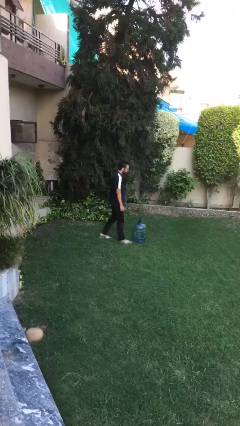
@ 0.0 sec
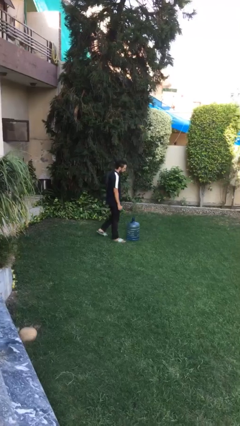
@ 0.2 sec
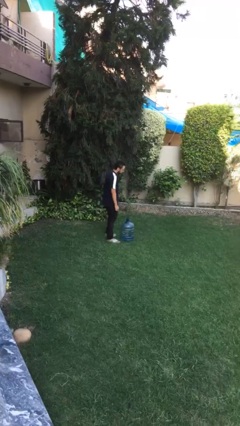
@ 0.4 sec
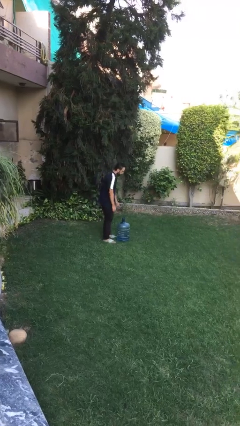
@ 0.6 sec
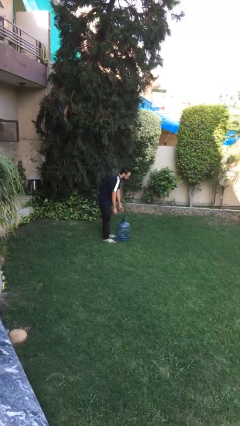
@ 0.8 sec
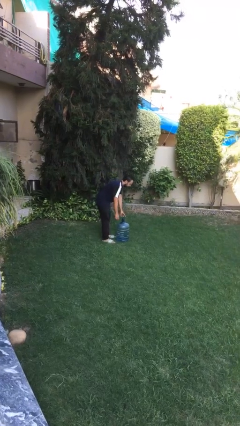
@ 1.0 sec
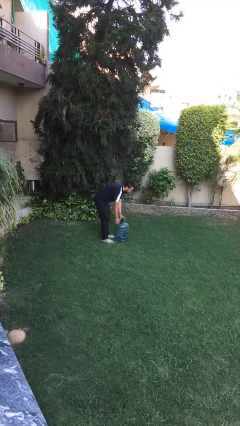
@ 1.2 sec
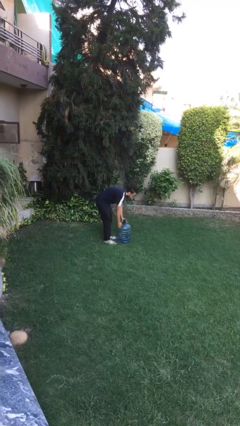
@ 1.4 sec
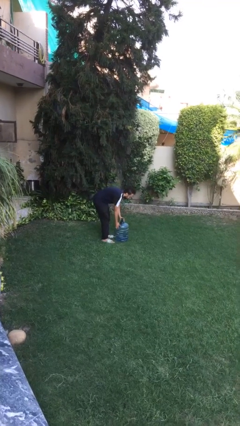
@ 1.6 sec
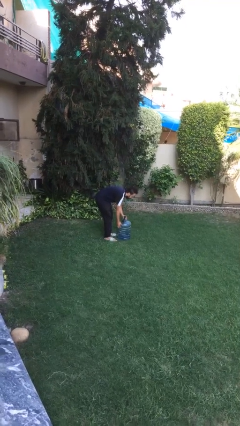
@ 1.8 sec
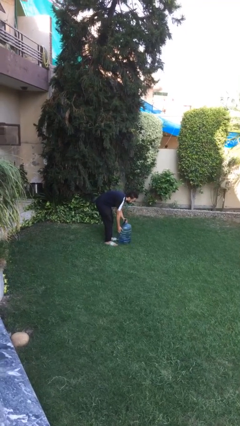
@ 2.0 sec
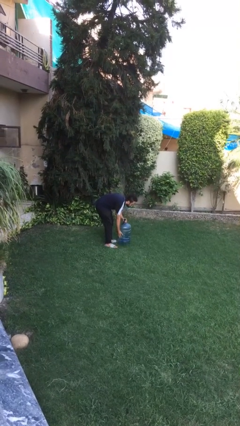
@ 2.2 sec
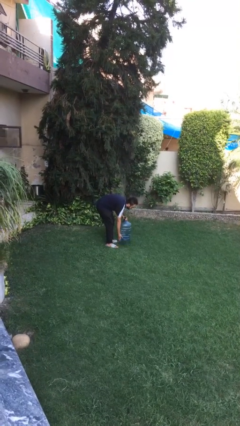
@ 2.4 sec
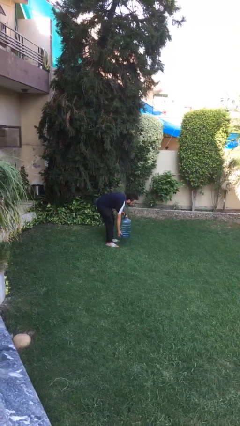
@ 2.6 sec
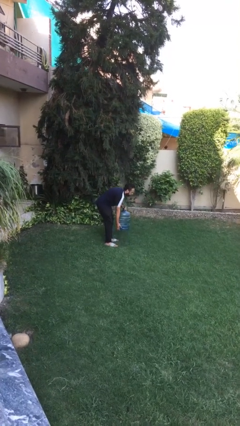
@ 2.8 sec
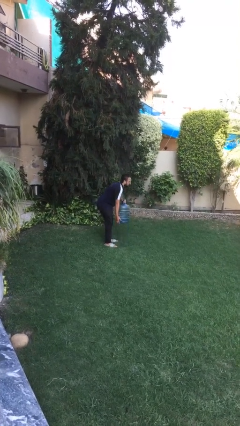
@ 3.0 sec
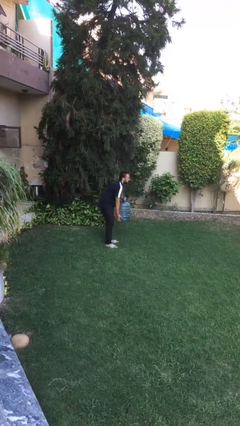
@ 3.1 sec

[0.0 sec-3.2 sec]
person picks up object from floor

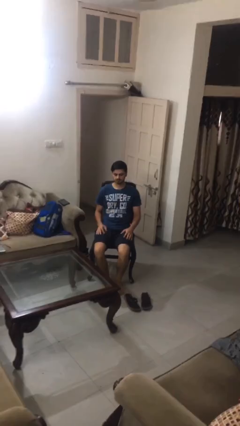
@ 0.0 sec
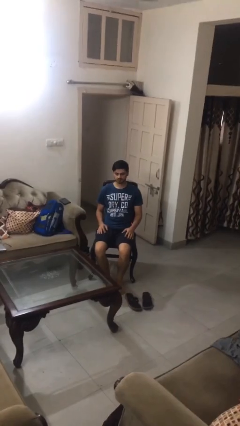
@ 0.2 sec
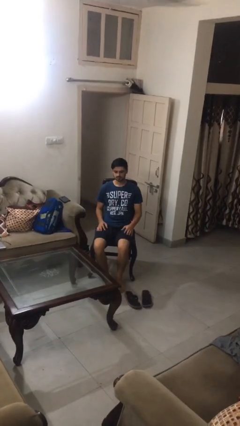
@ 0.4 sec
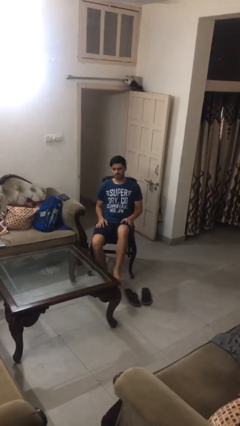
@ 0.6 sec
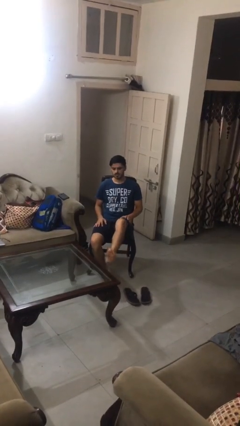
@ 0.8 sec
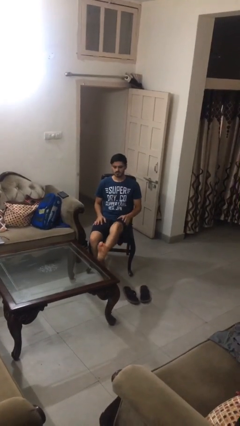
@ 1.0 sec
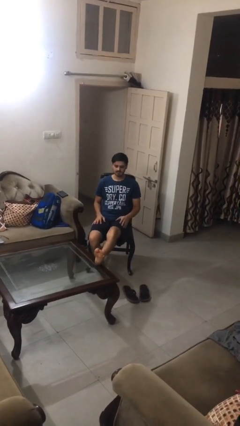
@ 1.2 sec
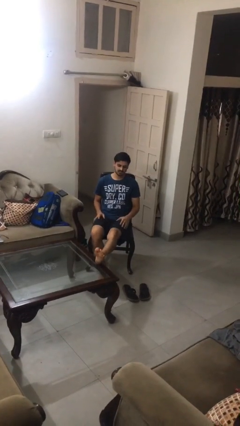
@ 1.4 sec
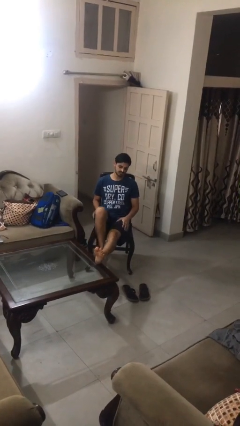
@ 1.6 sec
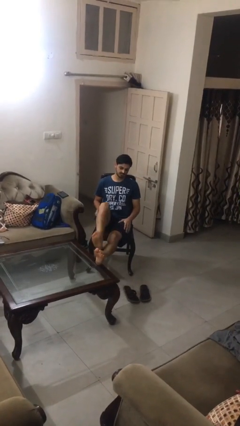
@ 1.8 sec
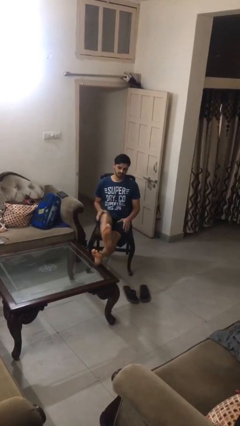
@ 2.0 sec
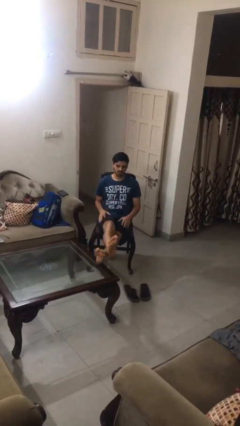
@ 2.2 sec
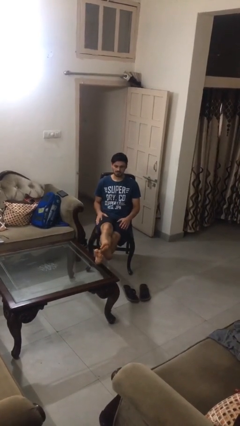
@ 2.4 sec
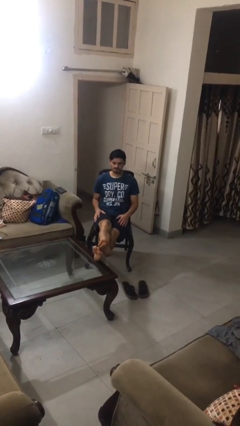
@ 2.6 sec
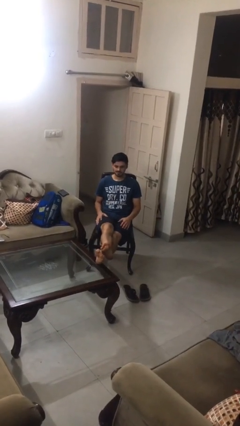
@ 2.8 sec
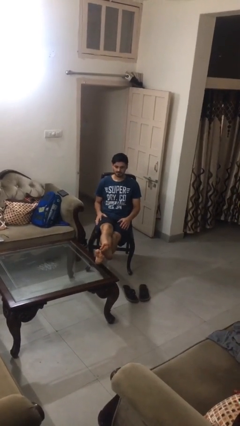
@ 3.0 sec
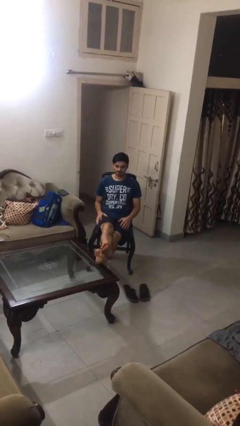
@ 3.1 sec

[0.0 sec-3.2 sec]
person puts feet up

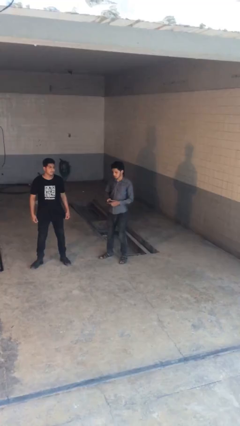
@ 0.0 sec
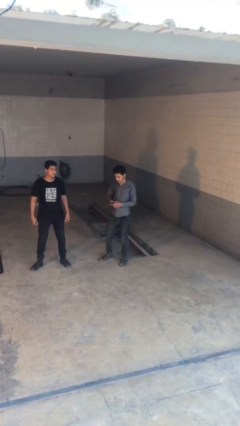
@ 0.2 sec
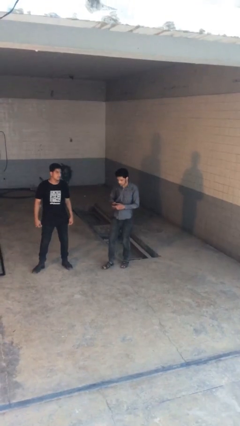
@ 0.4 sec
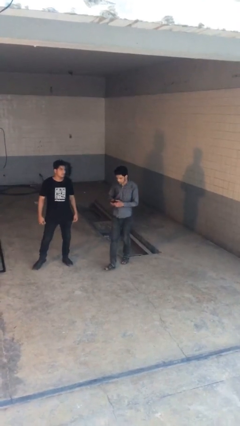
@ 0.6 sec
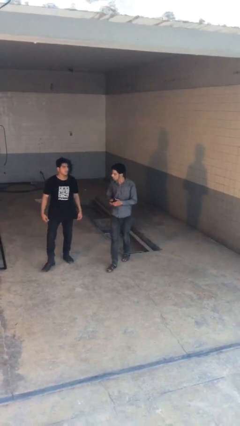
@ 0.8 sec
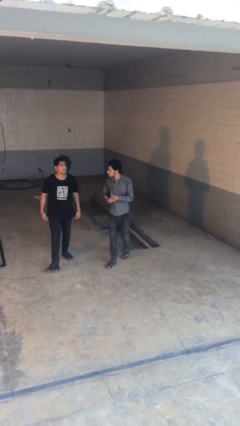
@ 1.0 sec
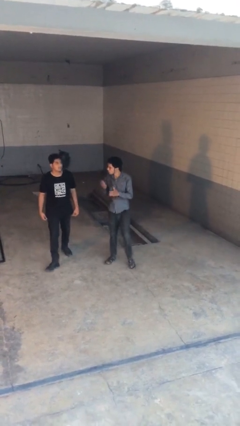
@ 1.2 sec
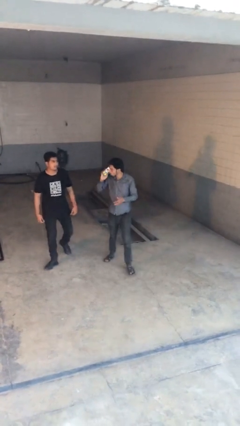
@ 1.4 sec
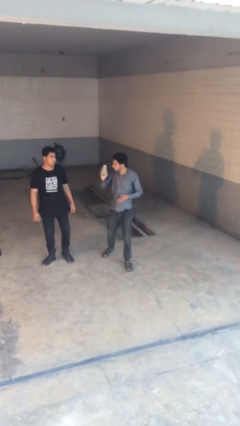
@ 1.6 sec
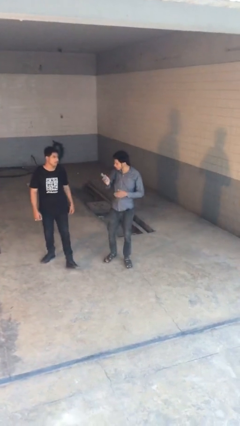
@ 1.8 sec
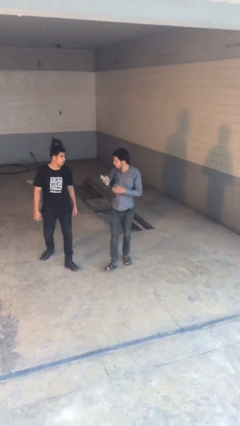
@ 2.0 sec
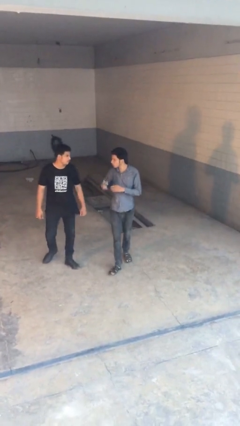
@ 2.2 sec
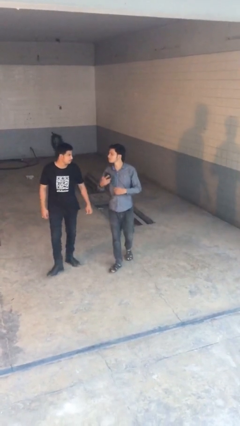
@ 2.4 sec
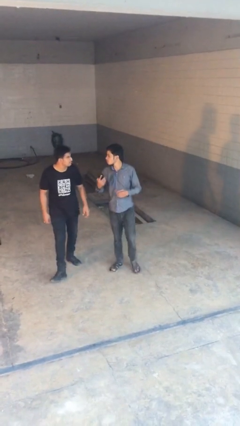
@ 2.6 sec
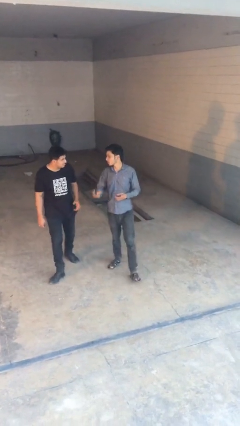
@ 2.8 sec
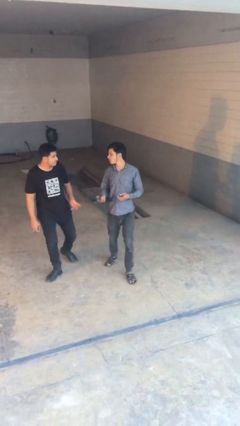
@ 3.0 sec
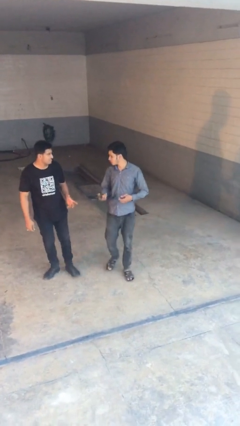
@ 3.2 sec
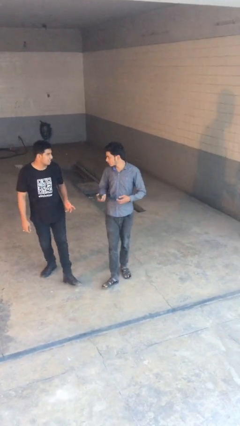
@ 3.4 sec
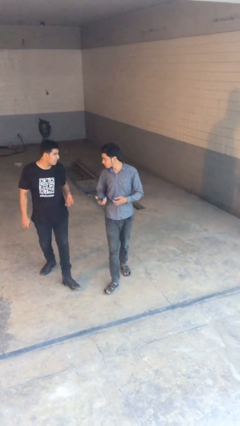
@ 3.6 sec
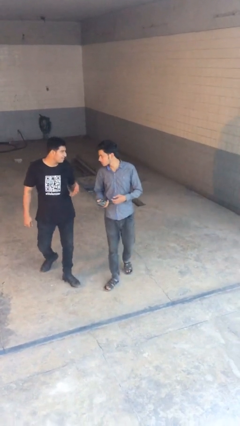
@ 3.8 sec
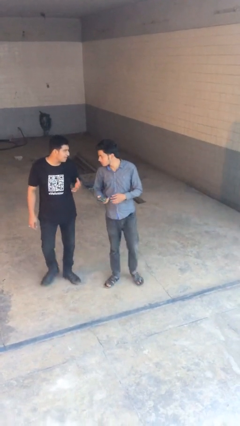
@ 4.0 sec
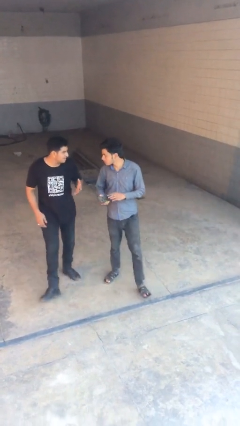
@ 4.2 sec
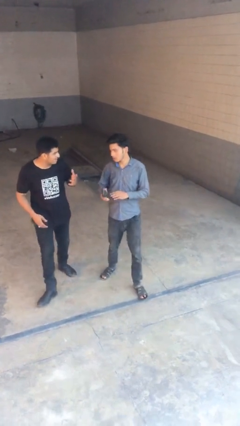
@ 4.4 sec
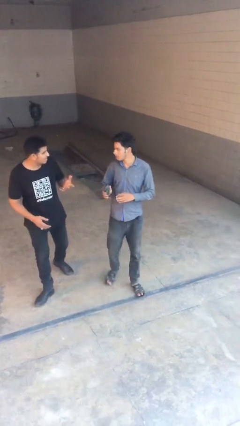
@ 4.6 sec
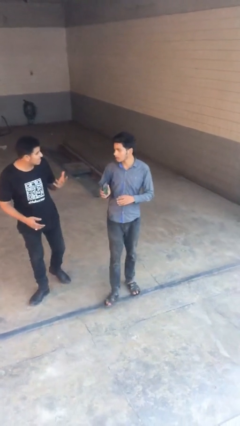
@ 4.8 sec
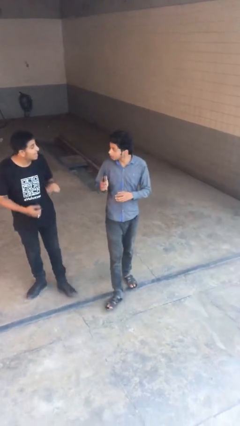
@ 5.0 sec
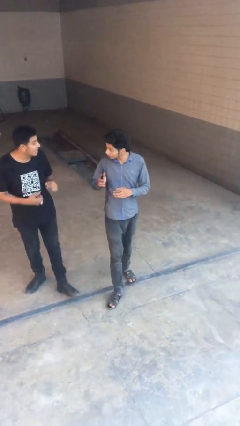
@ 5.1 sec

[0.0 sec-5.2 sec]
person talks to person

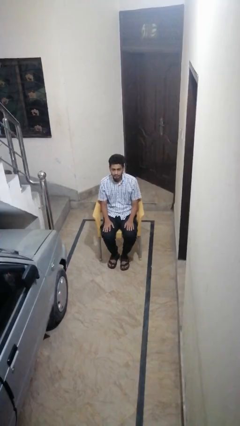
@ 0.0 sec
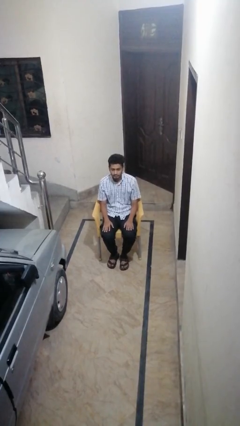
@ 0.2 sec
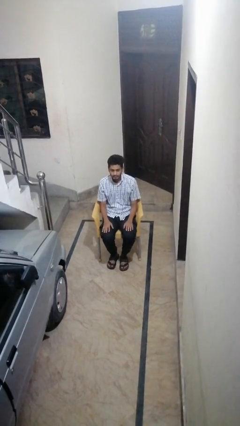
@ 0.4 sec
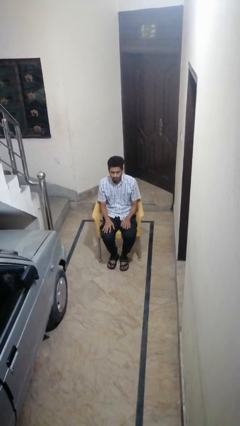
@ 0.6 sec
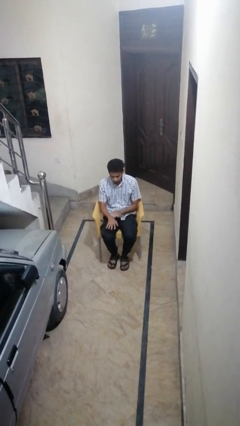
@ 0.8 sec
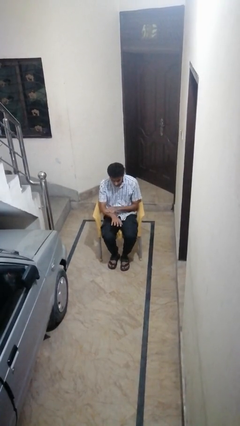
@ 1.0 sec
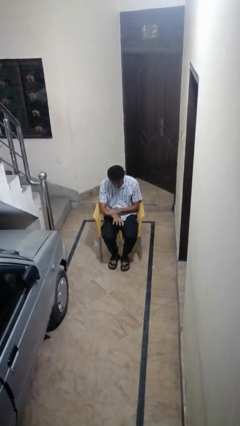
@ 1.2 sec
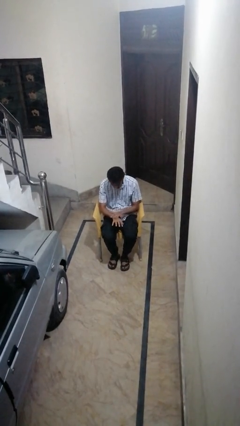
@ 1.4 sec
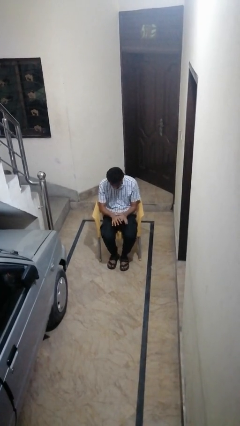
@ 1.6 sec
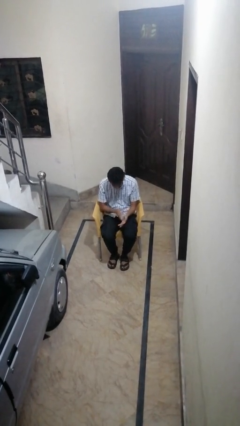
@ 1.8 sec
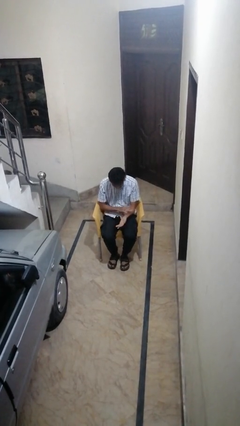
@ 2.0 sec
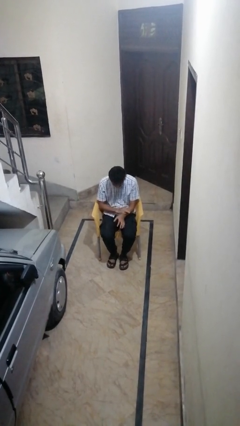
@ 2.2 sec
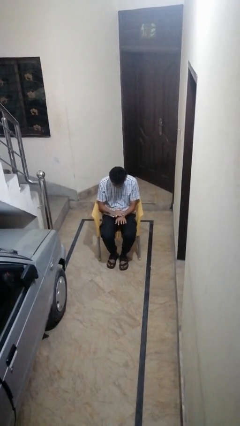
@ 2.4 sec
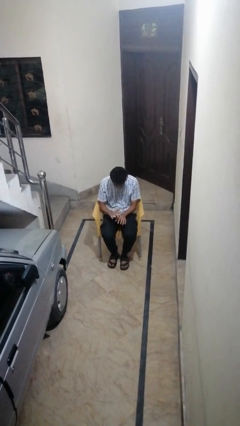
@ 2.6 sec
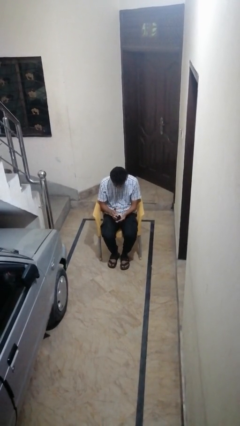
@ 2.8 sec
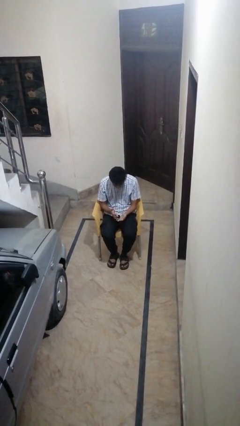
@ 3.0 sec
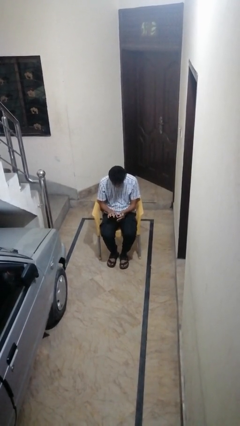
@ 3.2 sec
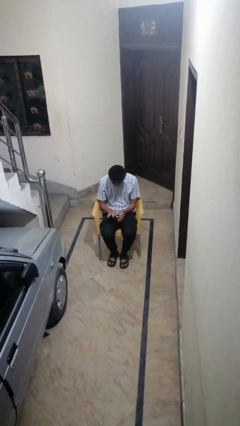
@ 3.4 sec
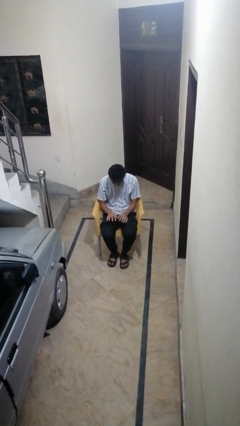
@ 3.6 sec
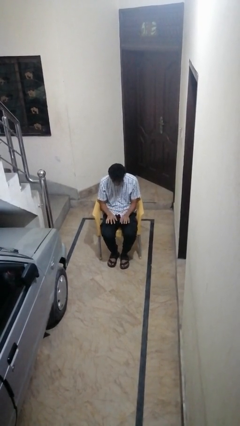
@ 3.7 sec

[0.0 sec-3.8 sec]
person looks at hands in lap

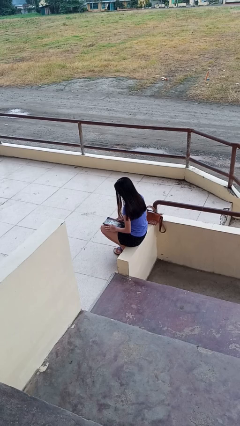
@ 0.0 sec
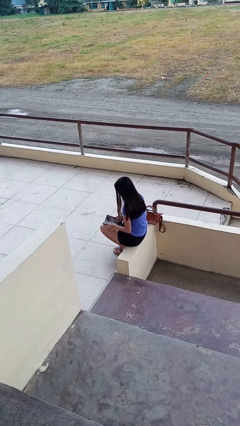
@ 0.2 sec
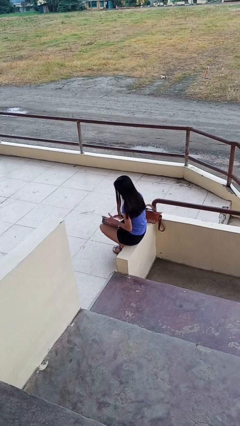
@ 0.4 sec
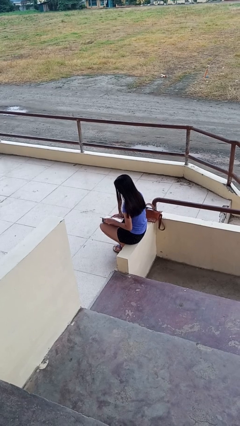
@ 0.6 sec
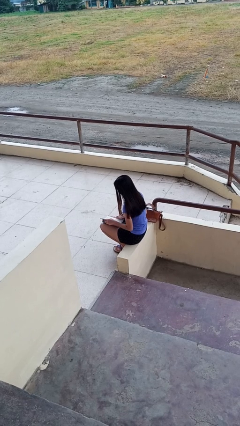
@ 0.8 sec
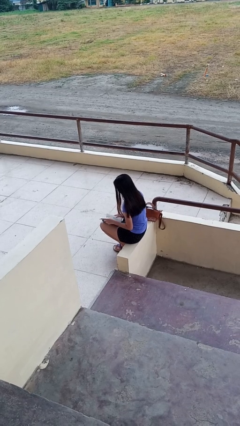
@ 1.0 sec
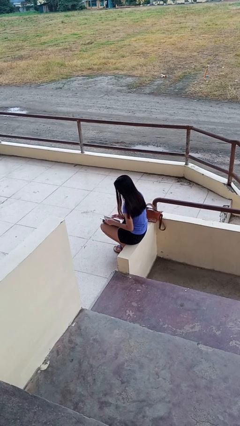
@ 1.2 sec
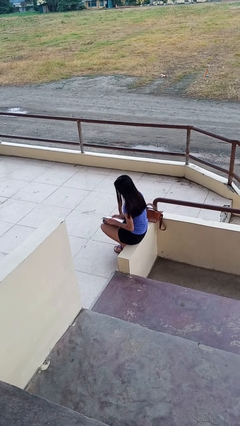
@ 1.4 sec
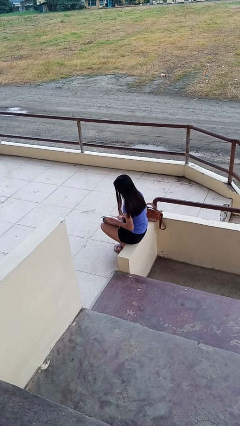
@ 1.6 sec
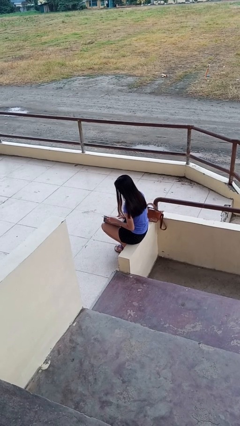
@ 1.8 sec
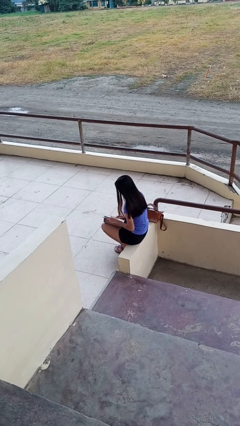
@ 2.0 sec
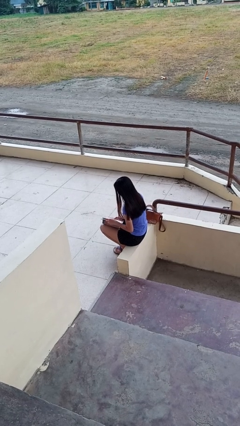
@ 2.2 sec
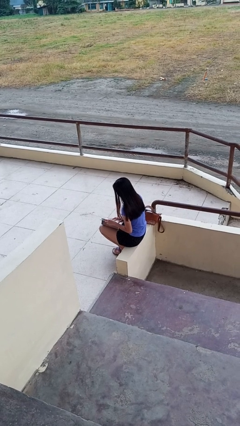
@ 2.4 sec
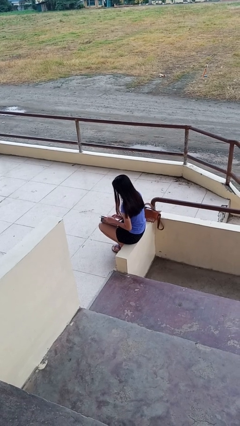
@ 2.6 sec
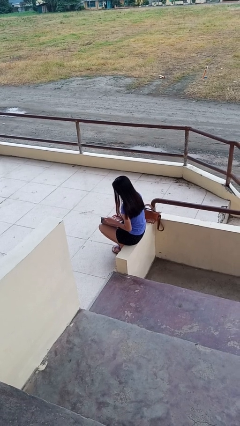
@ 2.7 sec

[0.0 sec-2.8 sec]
person reads book
